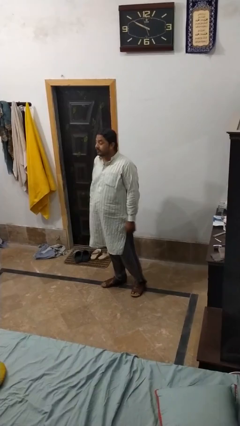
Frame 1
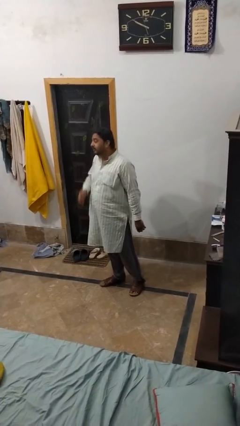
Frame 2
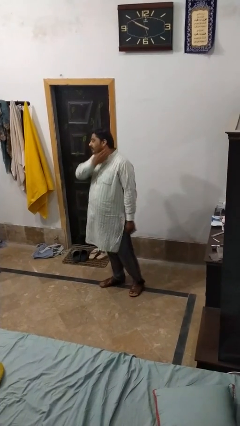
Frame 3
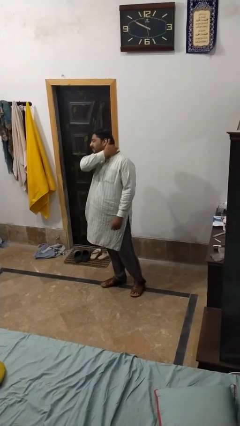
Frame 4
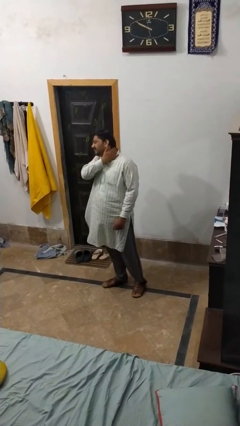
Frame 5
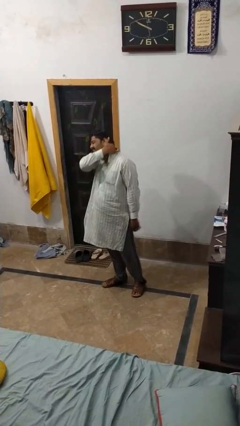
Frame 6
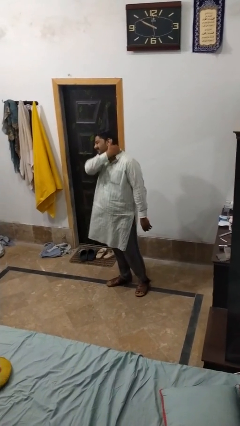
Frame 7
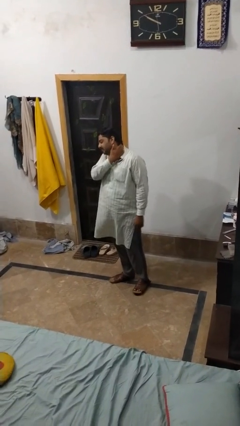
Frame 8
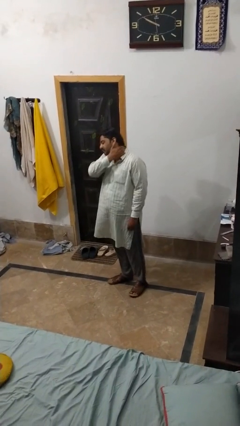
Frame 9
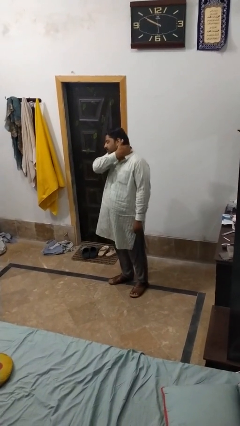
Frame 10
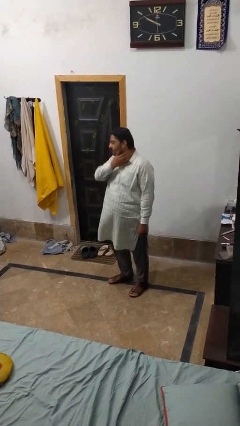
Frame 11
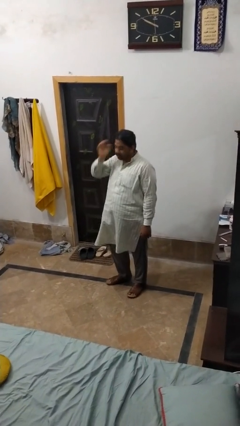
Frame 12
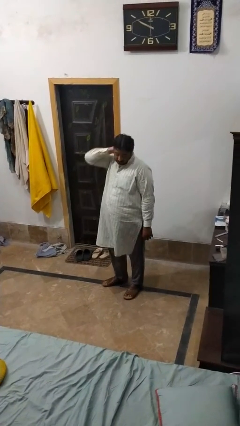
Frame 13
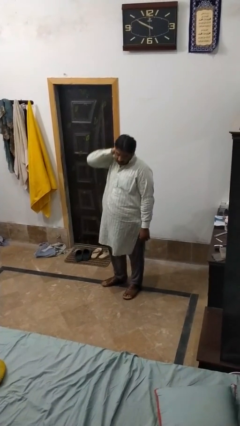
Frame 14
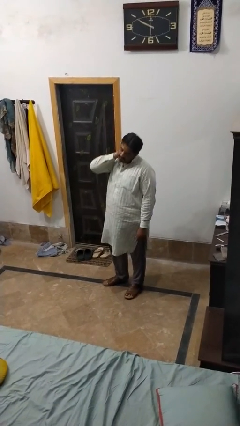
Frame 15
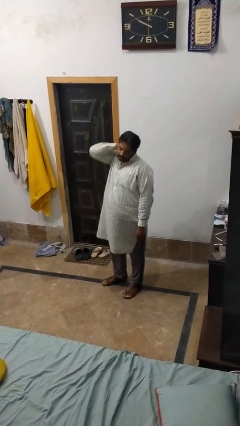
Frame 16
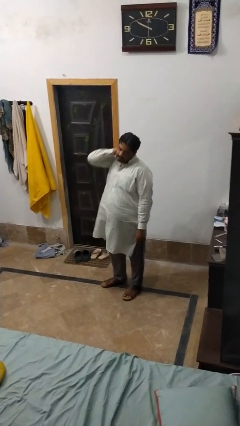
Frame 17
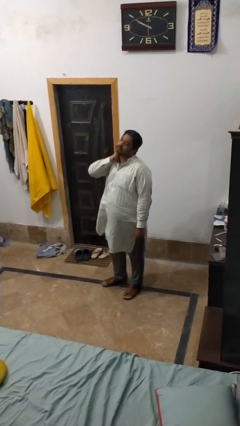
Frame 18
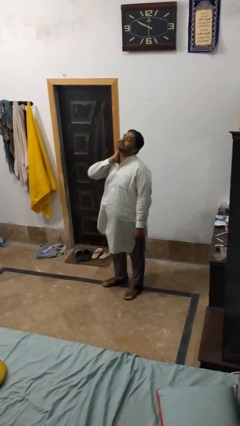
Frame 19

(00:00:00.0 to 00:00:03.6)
person rubs neck

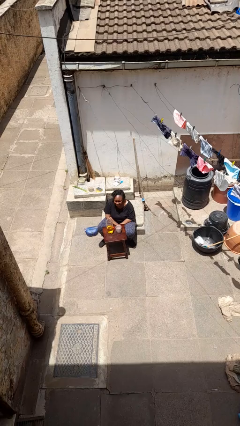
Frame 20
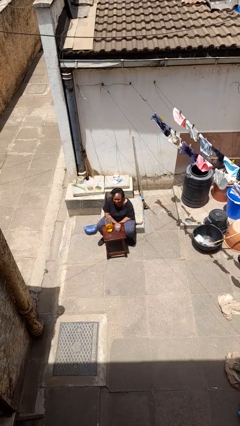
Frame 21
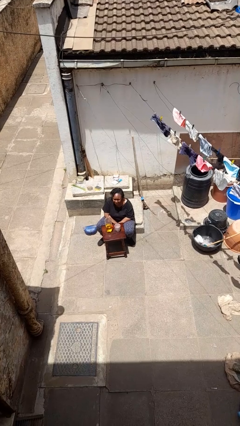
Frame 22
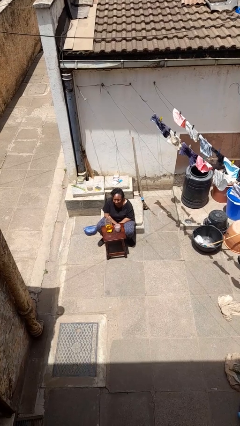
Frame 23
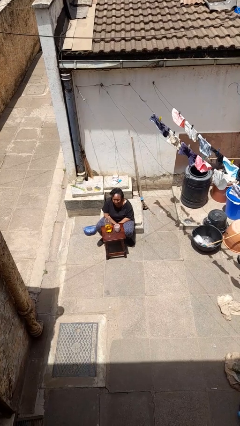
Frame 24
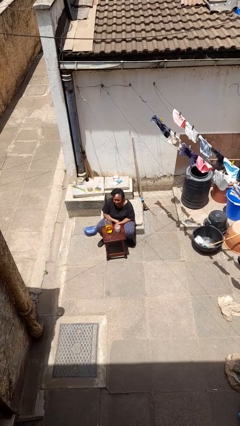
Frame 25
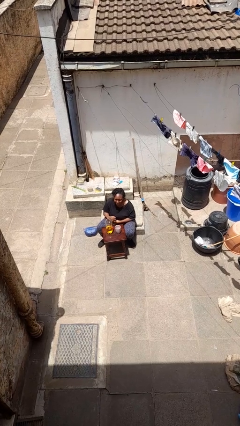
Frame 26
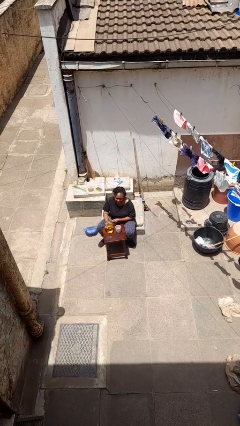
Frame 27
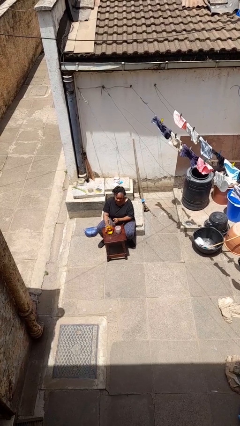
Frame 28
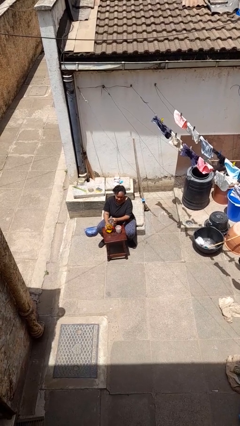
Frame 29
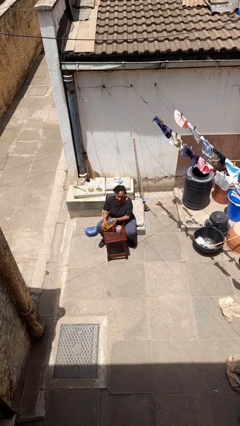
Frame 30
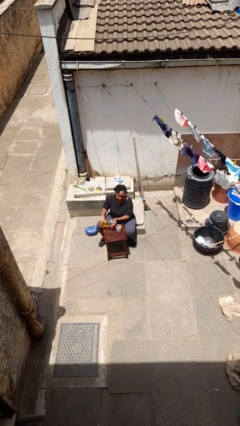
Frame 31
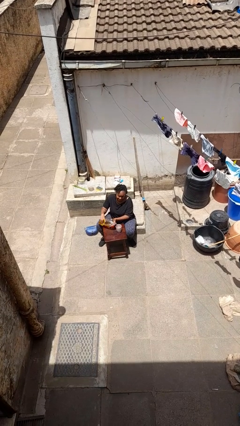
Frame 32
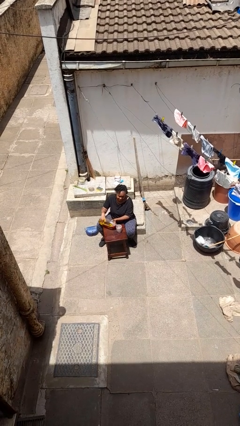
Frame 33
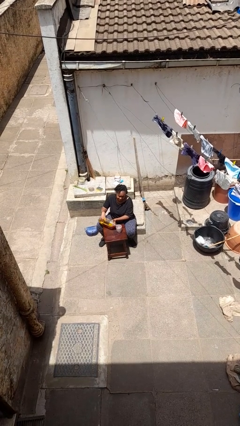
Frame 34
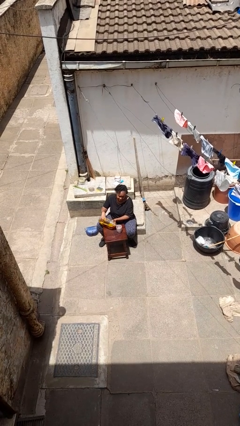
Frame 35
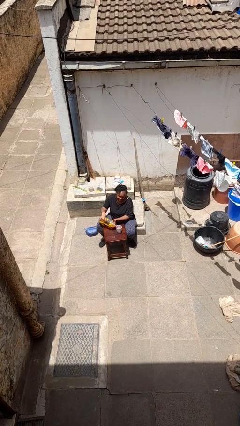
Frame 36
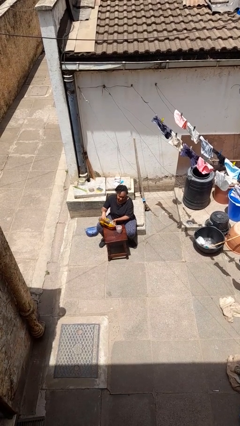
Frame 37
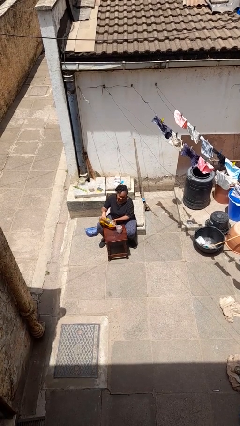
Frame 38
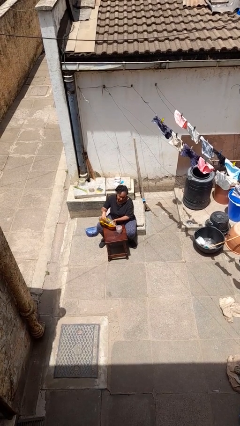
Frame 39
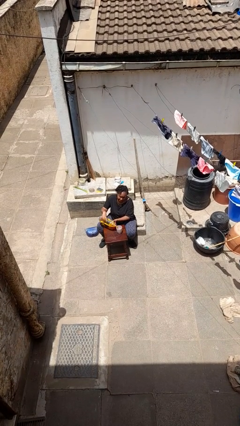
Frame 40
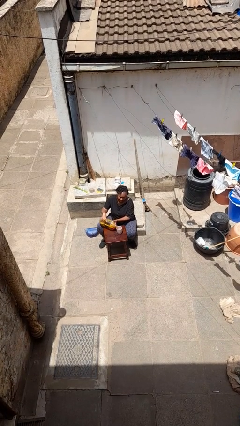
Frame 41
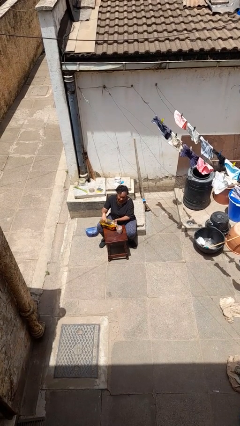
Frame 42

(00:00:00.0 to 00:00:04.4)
person pours liquid into cup

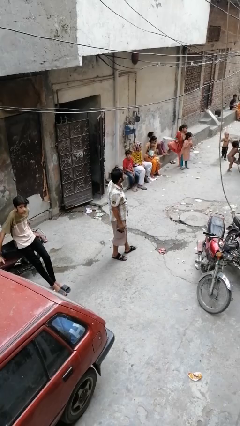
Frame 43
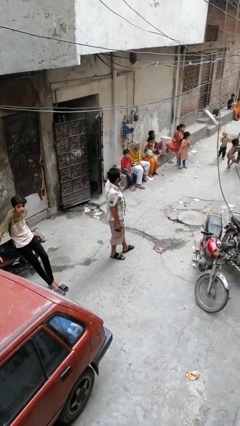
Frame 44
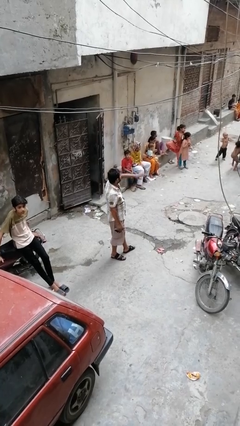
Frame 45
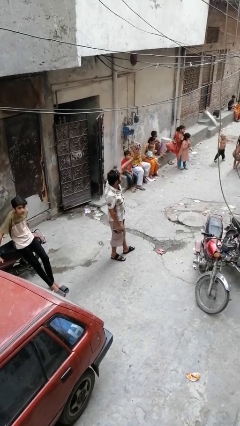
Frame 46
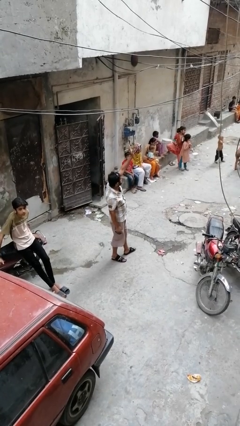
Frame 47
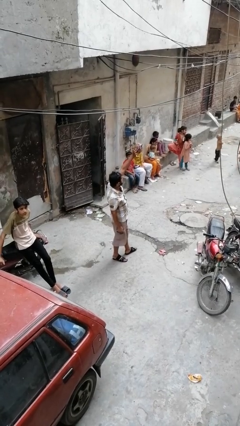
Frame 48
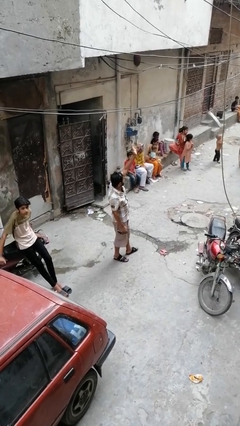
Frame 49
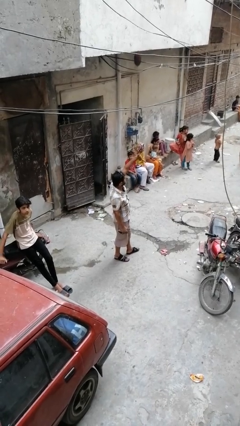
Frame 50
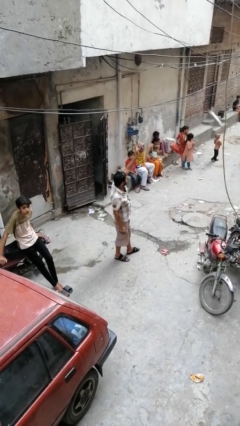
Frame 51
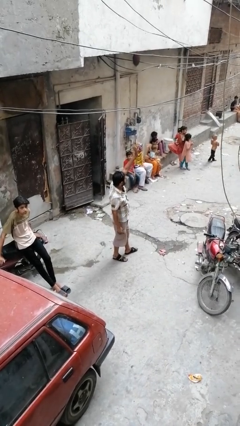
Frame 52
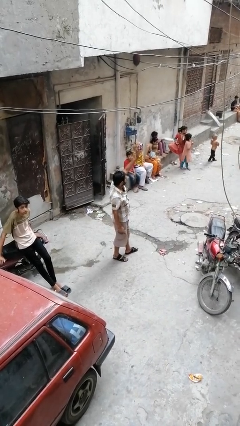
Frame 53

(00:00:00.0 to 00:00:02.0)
person waves at person

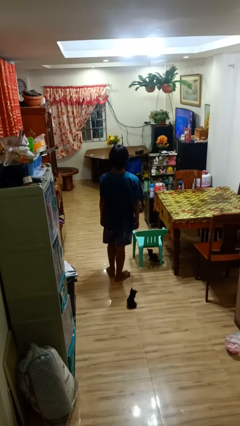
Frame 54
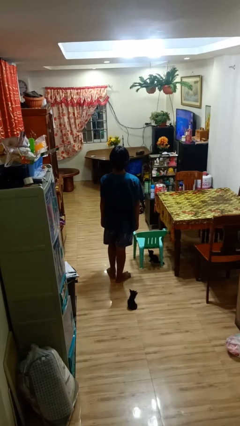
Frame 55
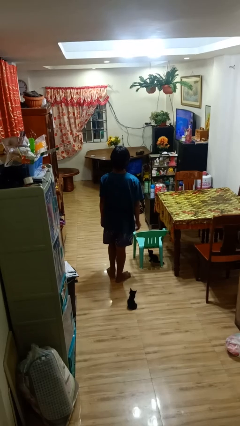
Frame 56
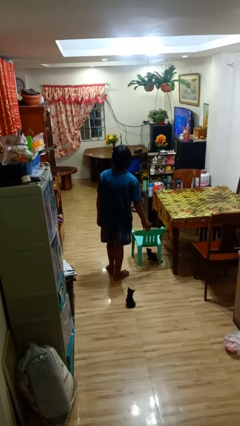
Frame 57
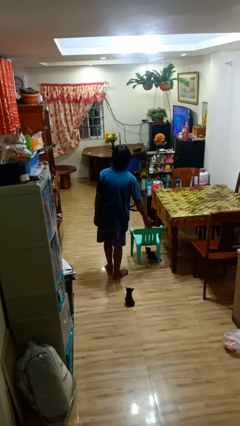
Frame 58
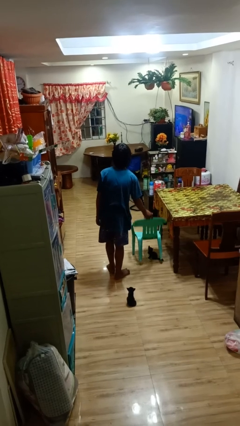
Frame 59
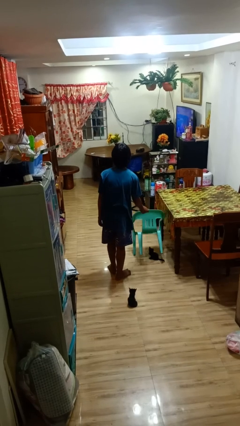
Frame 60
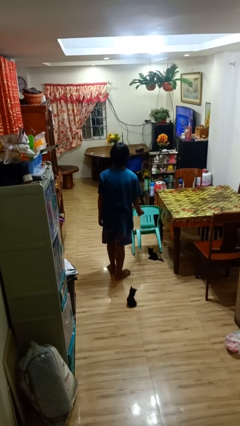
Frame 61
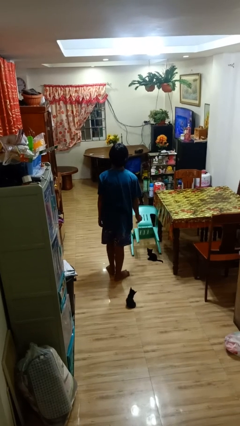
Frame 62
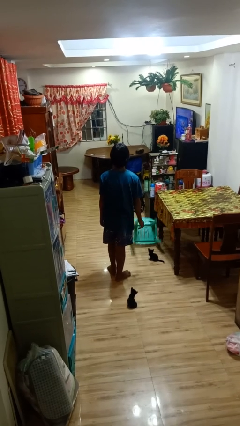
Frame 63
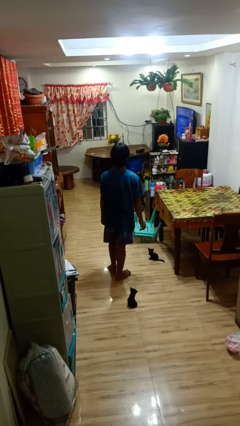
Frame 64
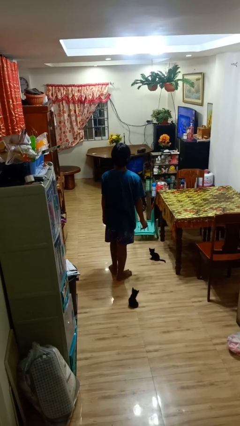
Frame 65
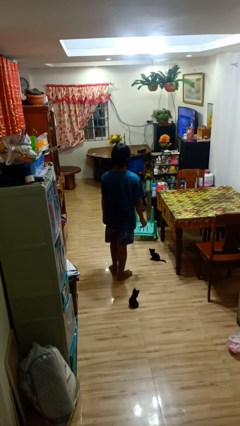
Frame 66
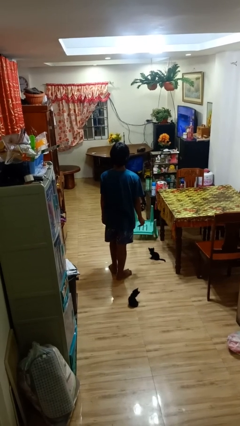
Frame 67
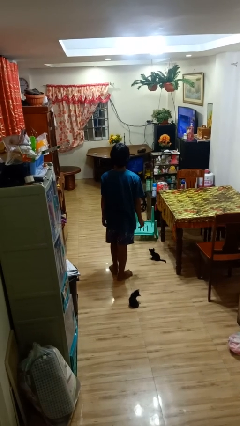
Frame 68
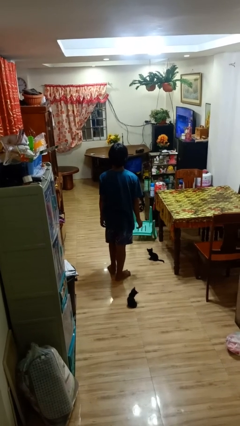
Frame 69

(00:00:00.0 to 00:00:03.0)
person knocks over furniture

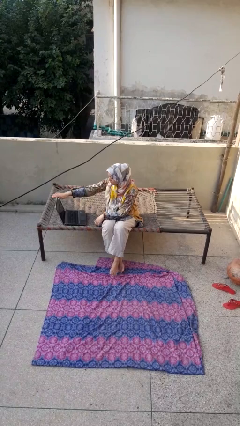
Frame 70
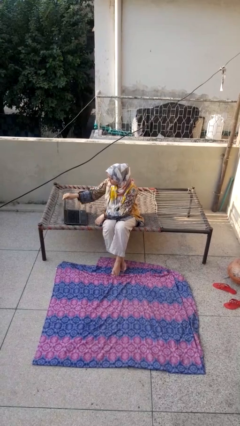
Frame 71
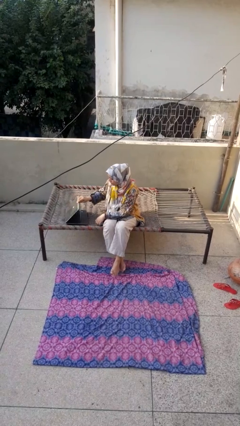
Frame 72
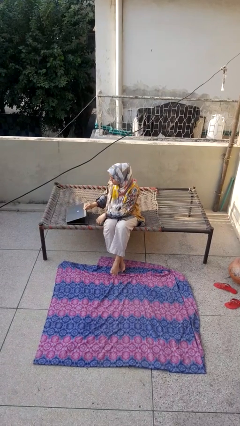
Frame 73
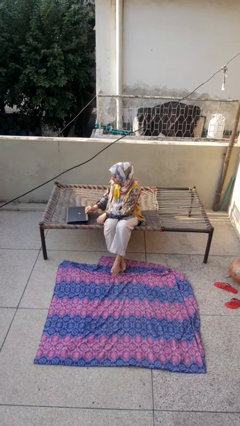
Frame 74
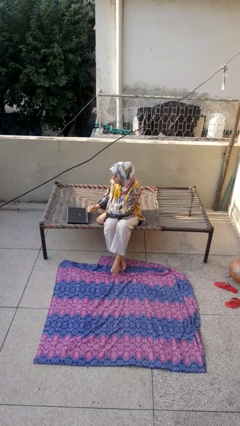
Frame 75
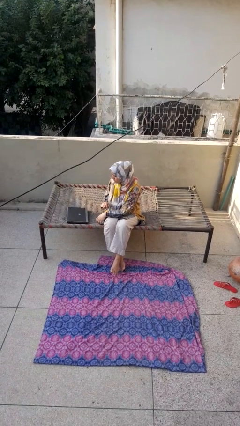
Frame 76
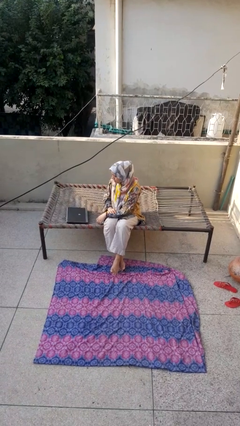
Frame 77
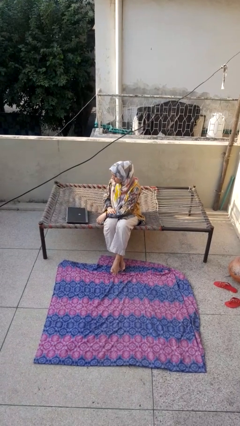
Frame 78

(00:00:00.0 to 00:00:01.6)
person closes laptop

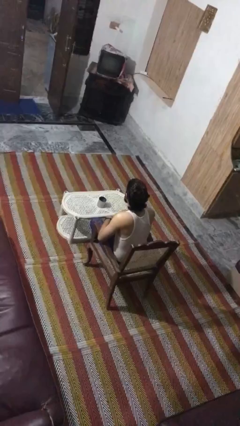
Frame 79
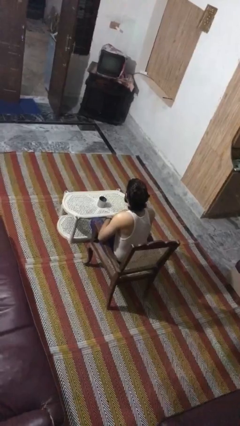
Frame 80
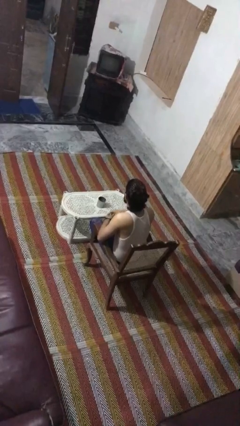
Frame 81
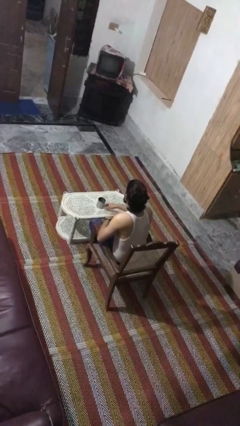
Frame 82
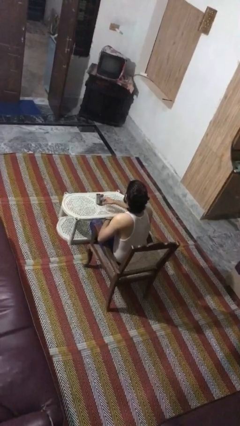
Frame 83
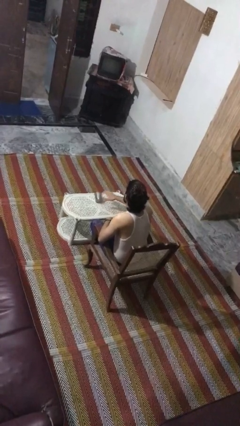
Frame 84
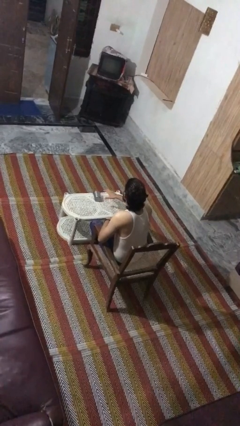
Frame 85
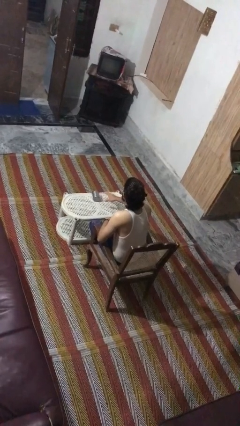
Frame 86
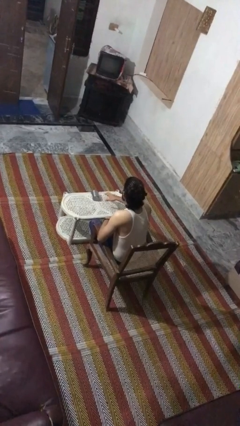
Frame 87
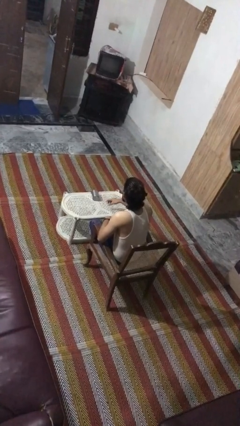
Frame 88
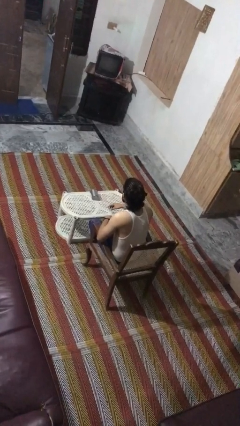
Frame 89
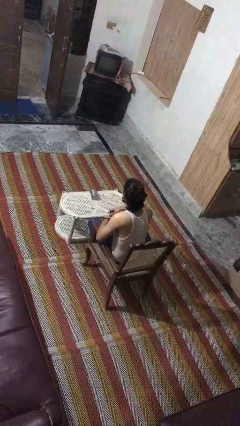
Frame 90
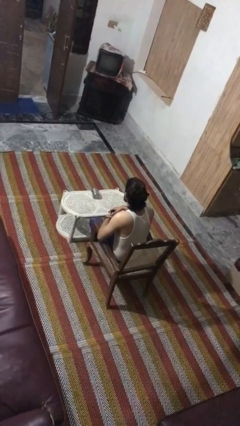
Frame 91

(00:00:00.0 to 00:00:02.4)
person knocks over glass

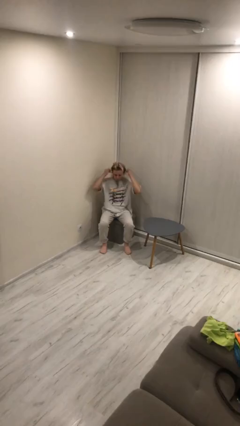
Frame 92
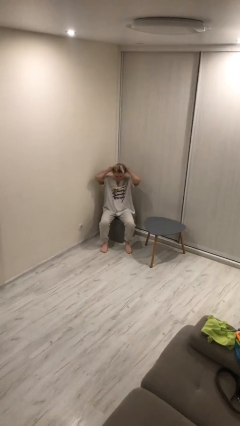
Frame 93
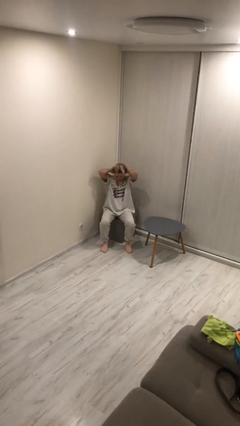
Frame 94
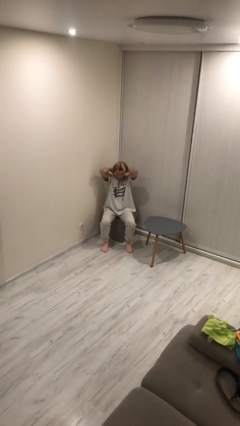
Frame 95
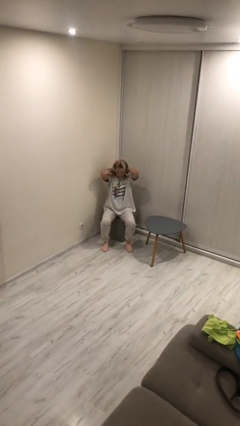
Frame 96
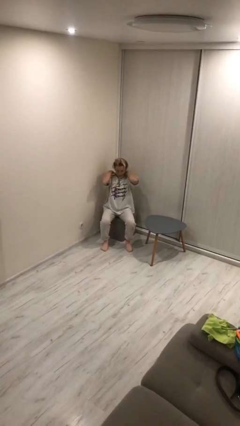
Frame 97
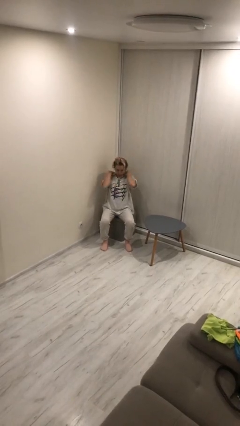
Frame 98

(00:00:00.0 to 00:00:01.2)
person puts on necklace
